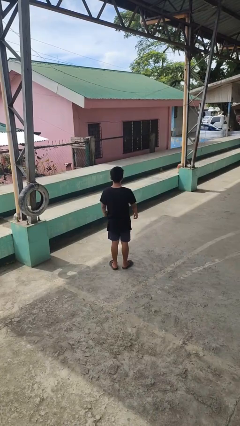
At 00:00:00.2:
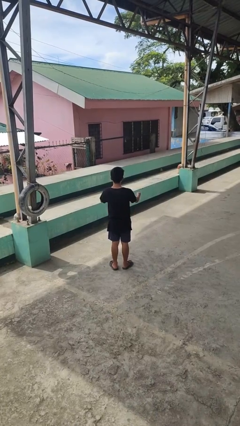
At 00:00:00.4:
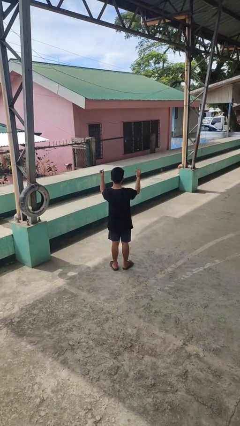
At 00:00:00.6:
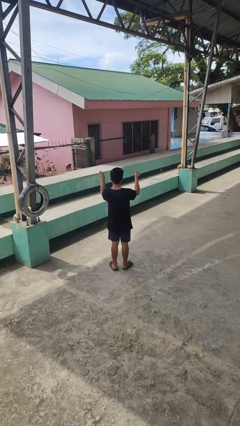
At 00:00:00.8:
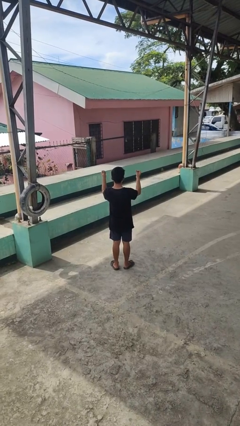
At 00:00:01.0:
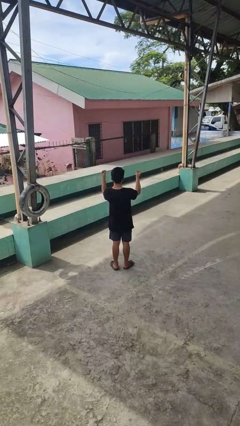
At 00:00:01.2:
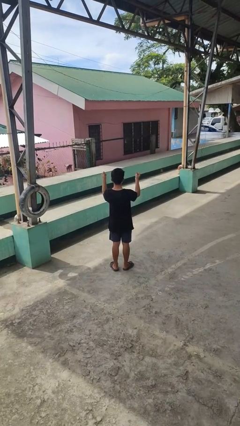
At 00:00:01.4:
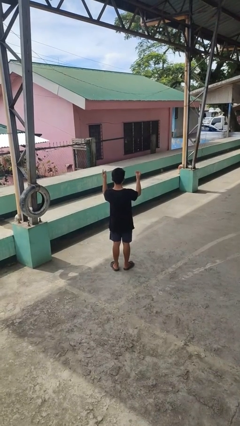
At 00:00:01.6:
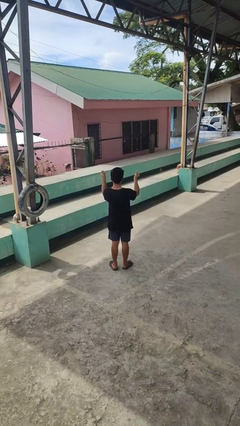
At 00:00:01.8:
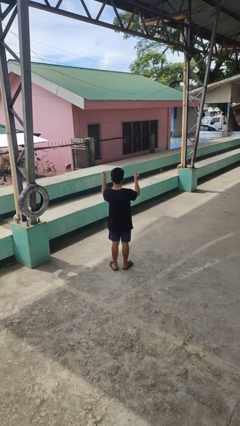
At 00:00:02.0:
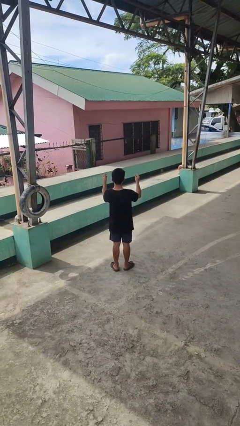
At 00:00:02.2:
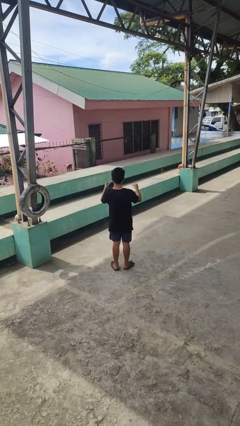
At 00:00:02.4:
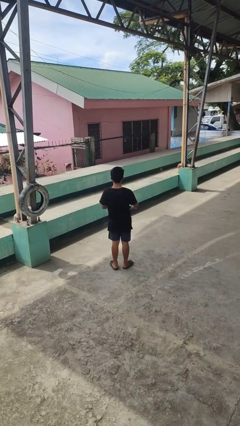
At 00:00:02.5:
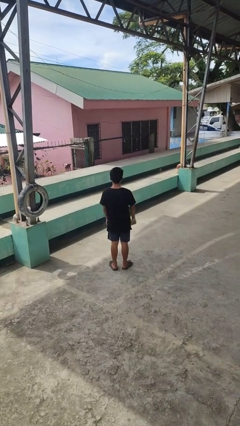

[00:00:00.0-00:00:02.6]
person snaps fingers

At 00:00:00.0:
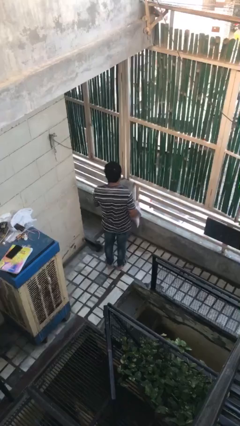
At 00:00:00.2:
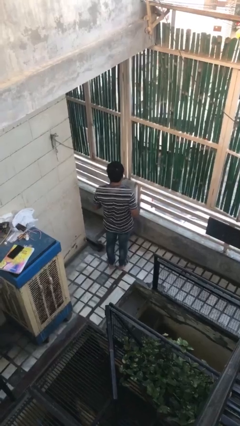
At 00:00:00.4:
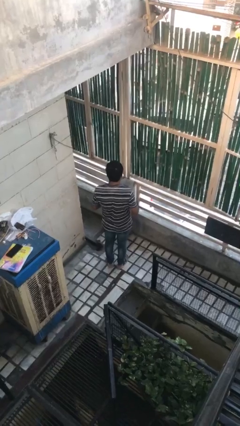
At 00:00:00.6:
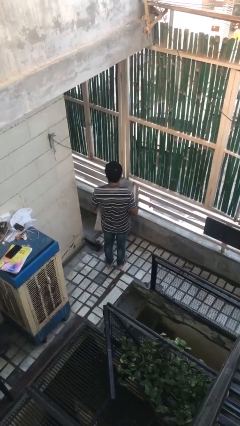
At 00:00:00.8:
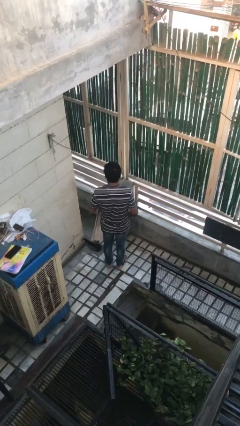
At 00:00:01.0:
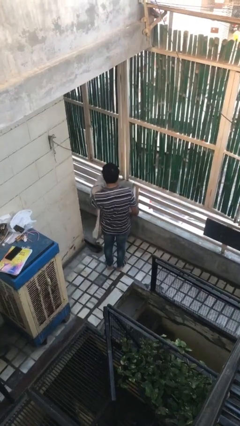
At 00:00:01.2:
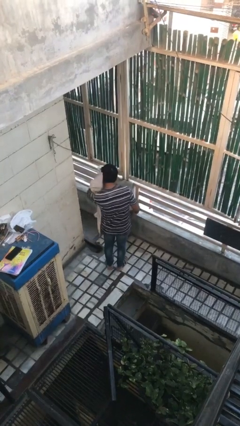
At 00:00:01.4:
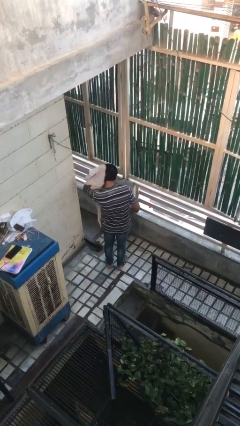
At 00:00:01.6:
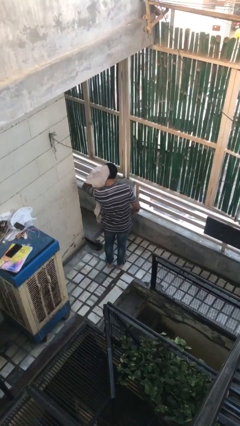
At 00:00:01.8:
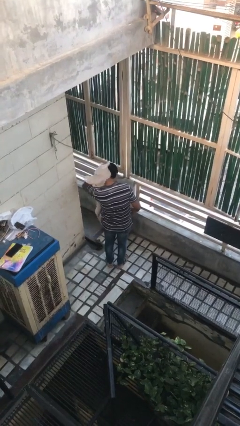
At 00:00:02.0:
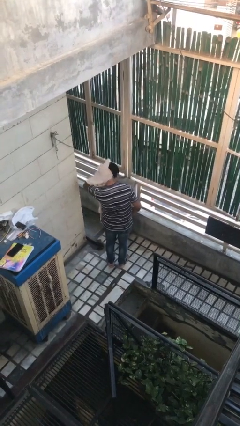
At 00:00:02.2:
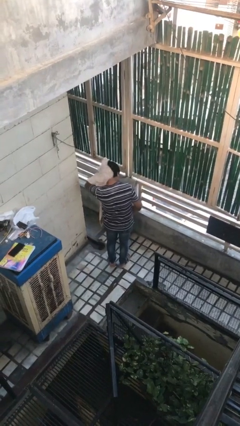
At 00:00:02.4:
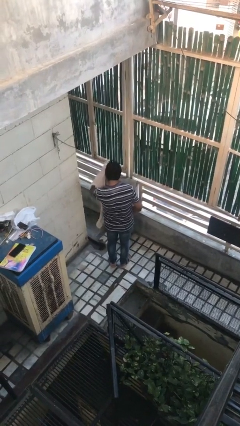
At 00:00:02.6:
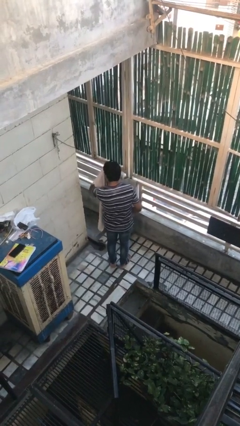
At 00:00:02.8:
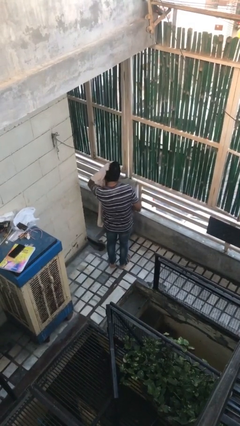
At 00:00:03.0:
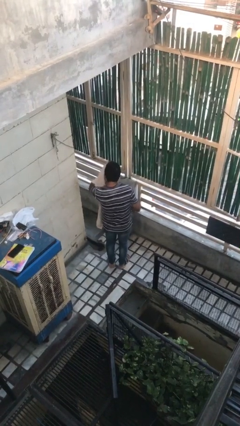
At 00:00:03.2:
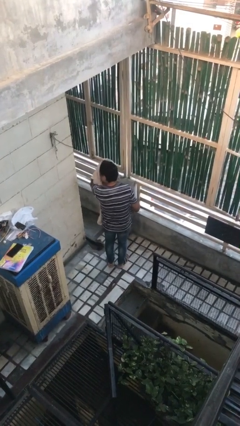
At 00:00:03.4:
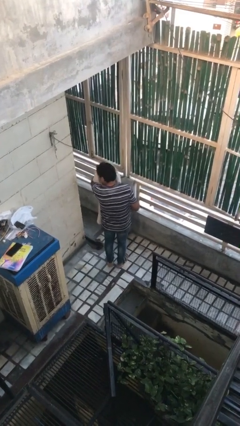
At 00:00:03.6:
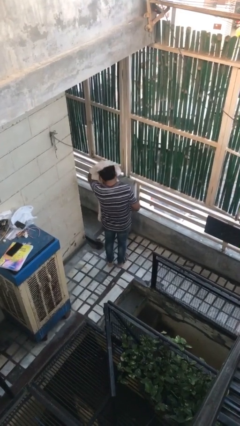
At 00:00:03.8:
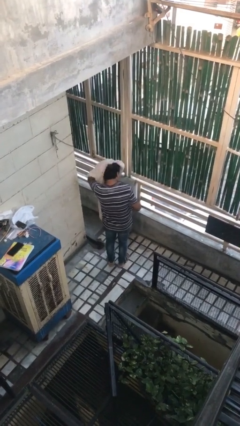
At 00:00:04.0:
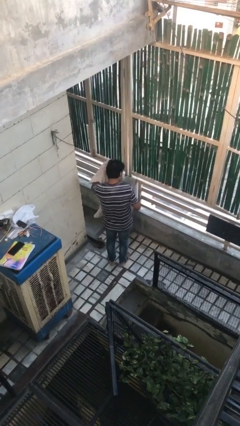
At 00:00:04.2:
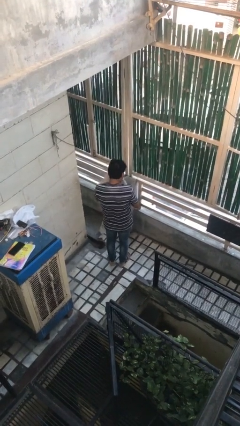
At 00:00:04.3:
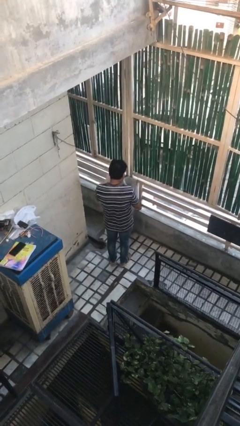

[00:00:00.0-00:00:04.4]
person dries hair with towel

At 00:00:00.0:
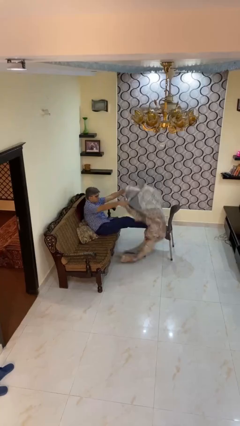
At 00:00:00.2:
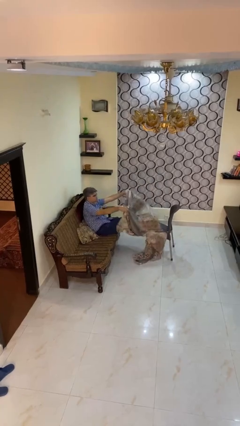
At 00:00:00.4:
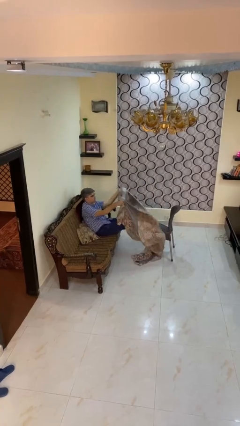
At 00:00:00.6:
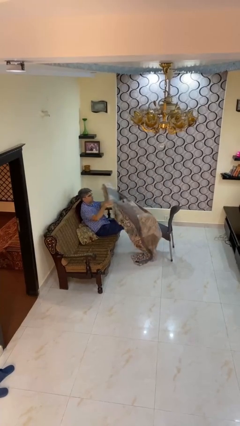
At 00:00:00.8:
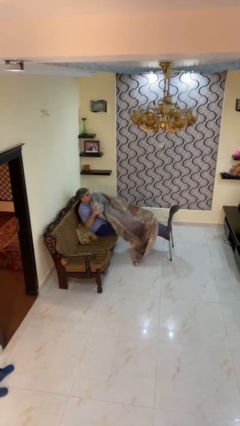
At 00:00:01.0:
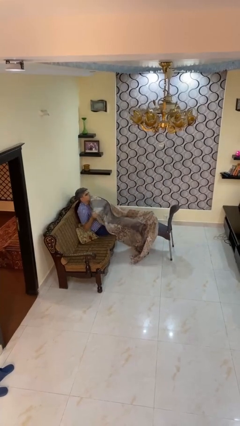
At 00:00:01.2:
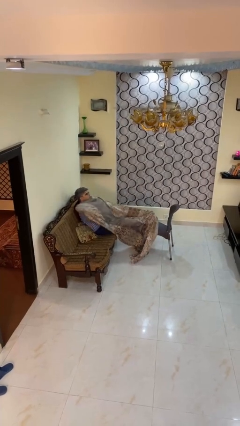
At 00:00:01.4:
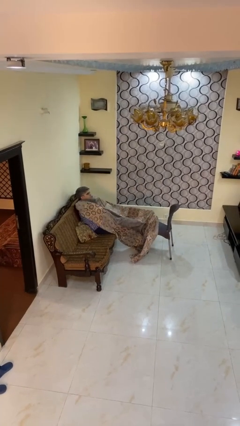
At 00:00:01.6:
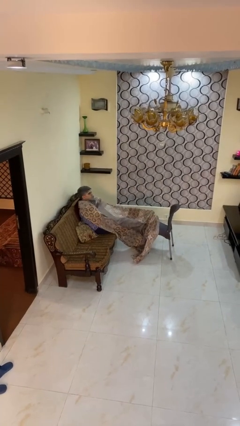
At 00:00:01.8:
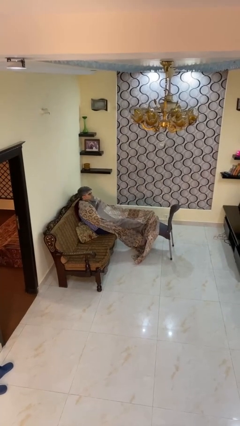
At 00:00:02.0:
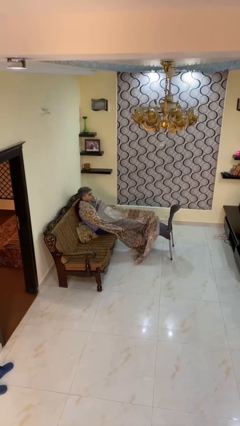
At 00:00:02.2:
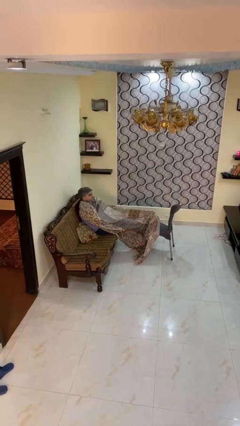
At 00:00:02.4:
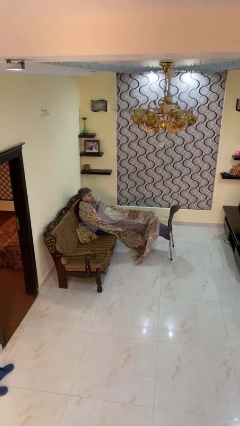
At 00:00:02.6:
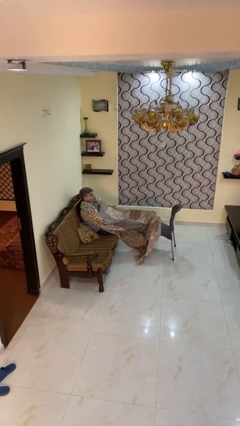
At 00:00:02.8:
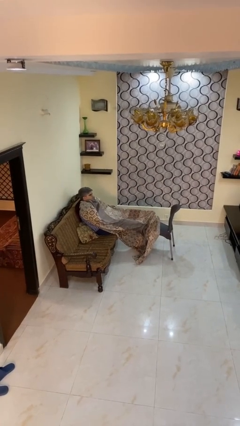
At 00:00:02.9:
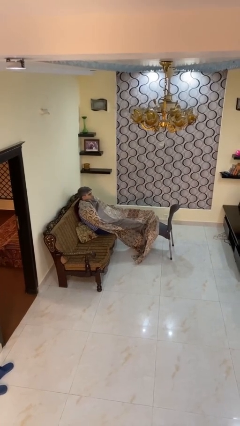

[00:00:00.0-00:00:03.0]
person covers with blanket

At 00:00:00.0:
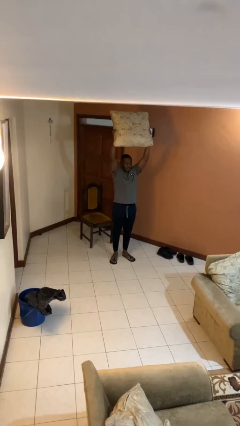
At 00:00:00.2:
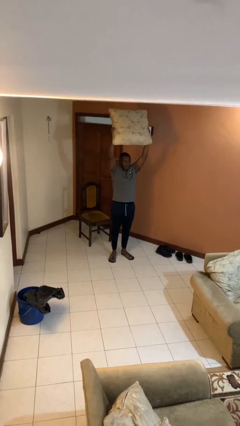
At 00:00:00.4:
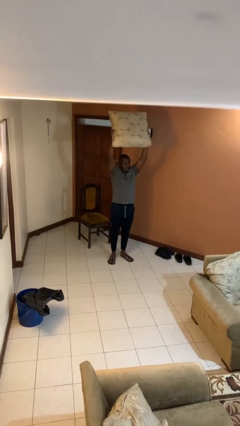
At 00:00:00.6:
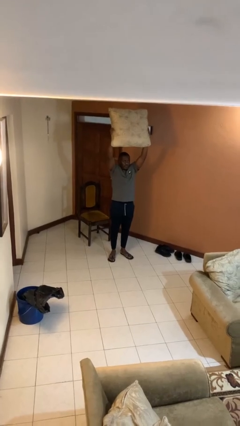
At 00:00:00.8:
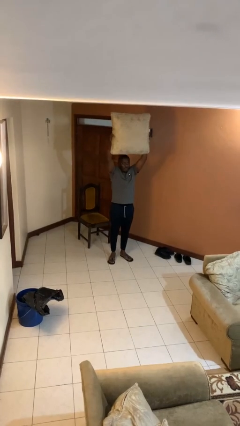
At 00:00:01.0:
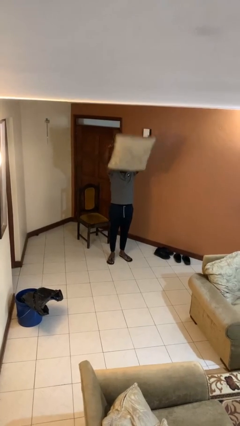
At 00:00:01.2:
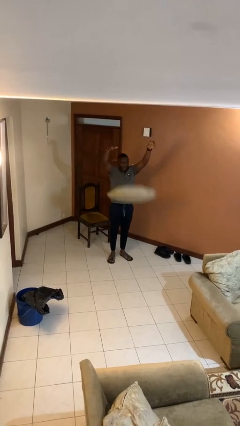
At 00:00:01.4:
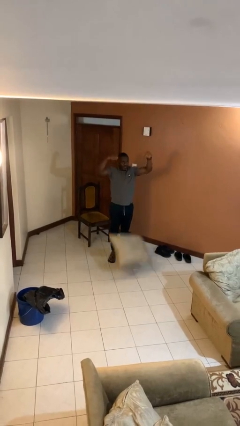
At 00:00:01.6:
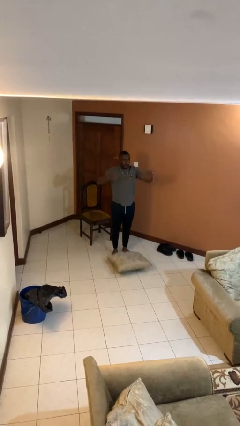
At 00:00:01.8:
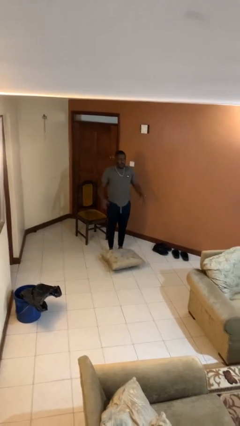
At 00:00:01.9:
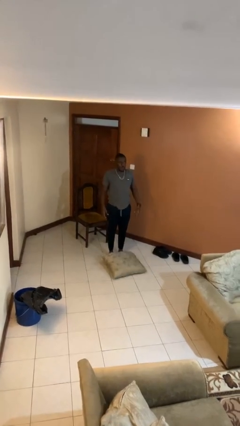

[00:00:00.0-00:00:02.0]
person drops object

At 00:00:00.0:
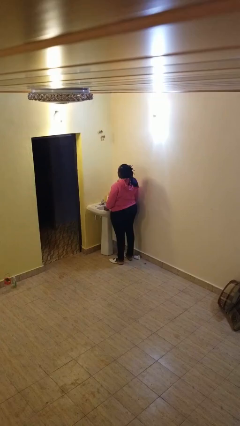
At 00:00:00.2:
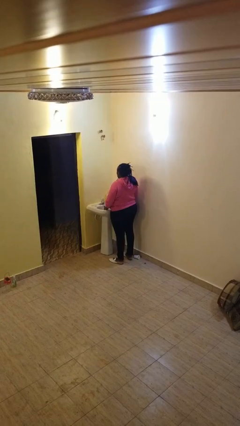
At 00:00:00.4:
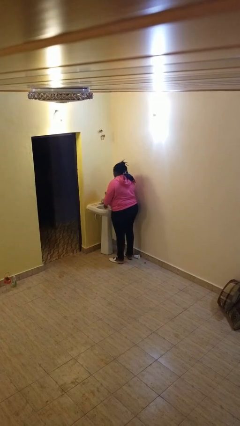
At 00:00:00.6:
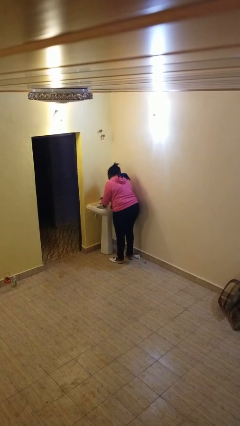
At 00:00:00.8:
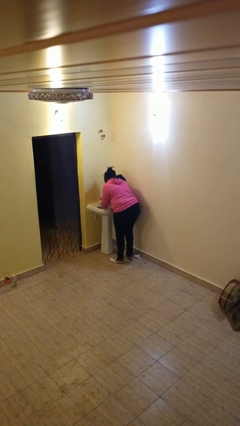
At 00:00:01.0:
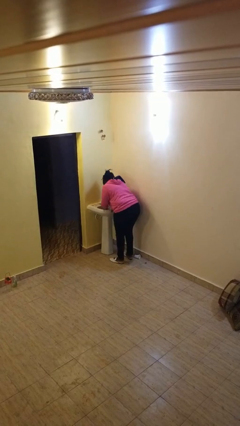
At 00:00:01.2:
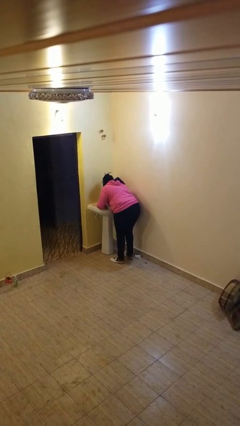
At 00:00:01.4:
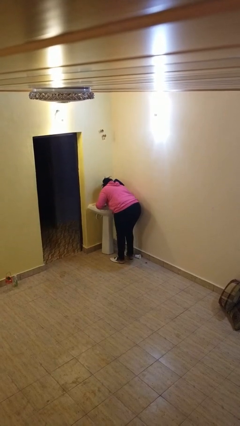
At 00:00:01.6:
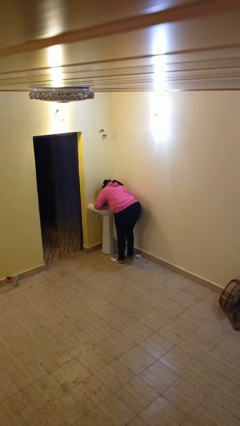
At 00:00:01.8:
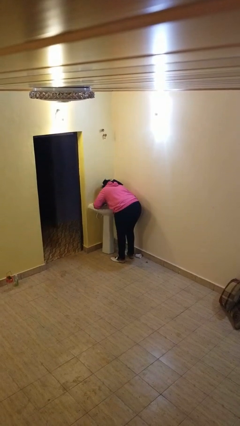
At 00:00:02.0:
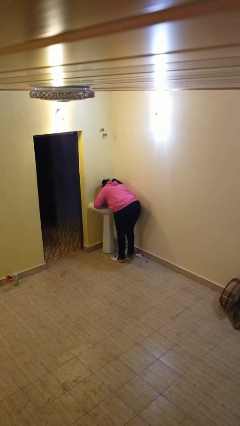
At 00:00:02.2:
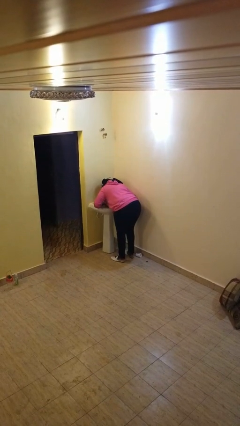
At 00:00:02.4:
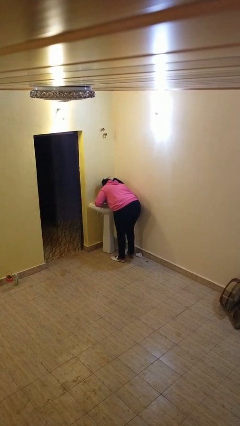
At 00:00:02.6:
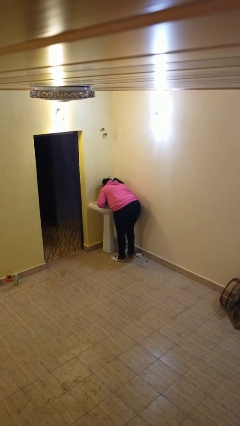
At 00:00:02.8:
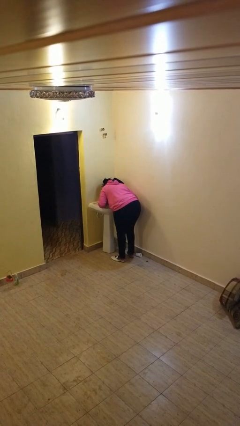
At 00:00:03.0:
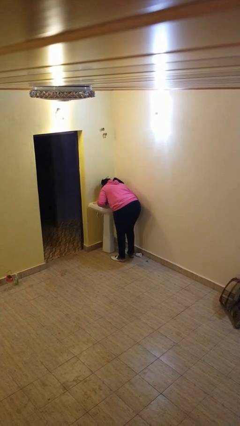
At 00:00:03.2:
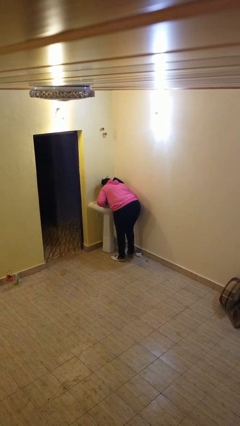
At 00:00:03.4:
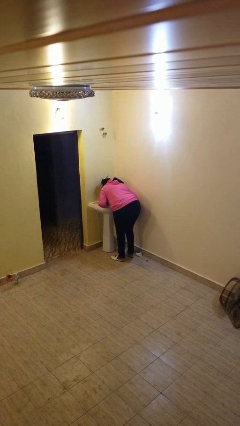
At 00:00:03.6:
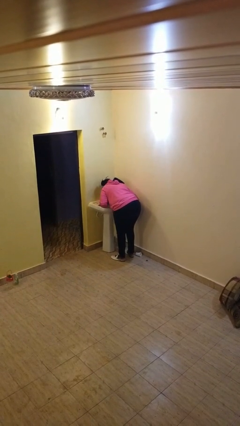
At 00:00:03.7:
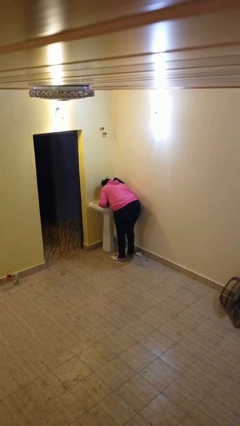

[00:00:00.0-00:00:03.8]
person washes face

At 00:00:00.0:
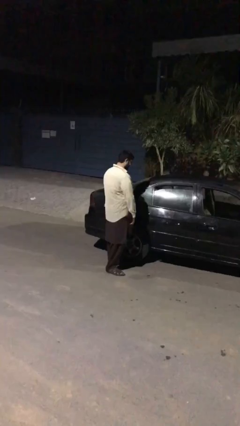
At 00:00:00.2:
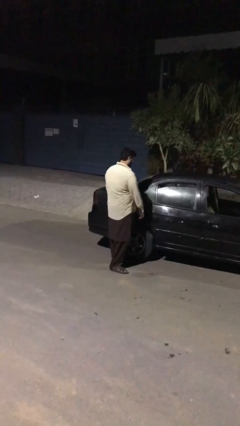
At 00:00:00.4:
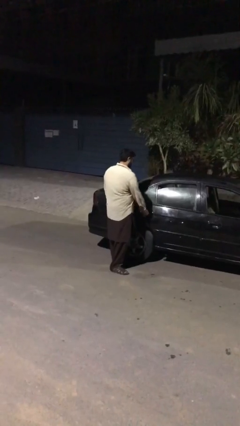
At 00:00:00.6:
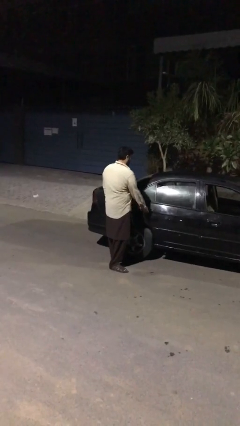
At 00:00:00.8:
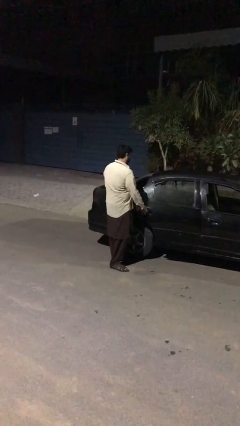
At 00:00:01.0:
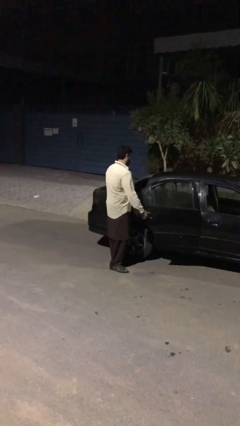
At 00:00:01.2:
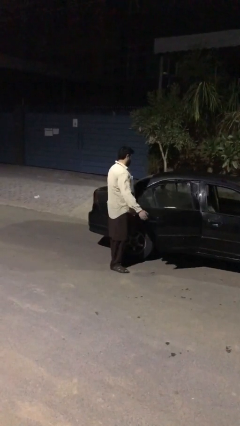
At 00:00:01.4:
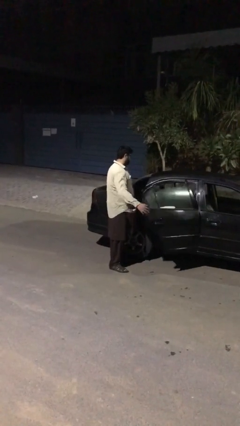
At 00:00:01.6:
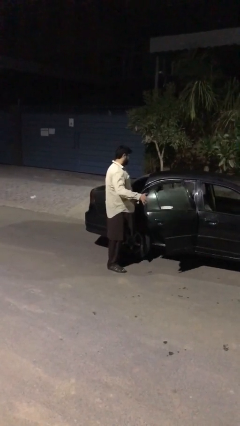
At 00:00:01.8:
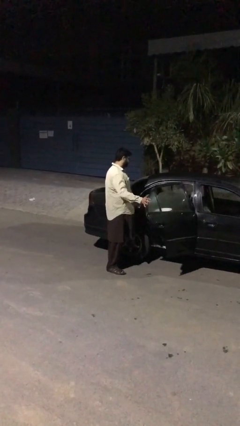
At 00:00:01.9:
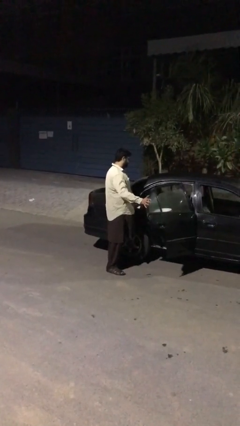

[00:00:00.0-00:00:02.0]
person opens car door
